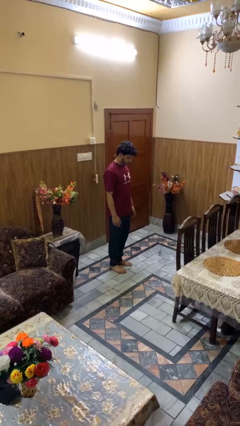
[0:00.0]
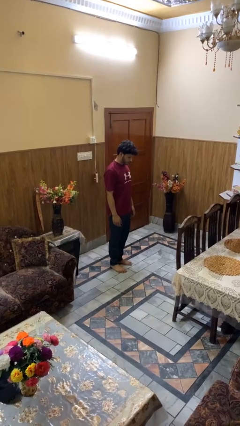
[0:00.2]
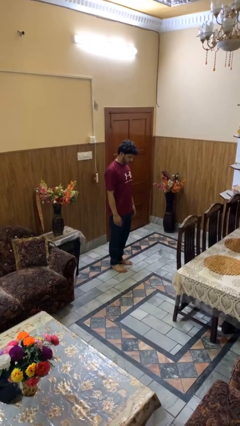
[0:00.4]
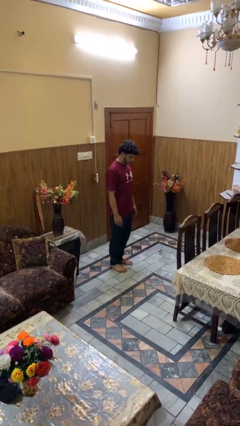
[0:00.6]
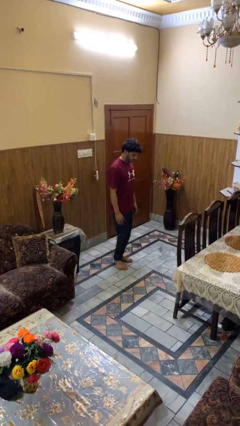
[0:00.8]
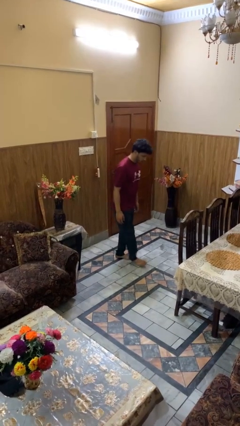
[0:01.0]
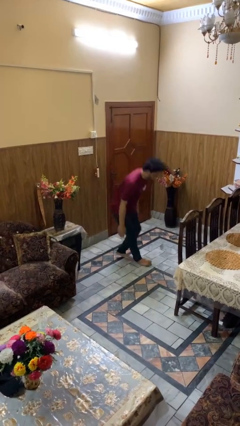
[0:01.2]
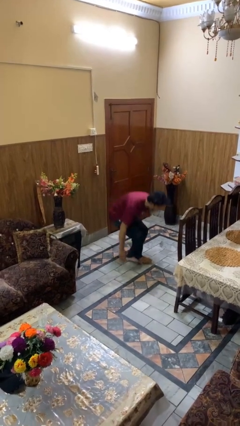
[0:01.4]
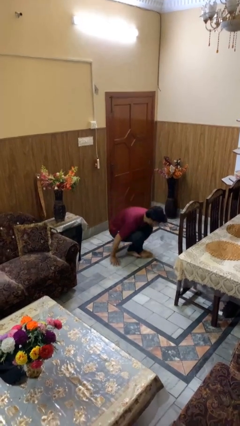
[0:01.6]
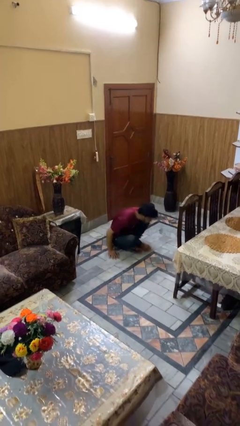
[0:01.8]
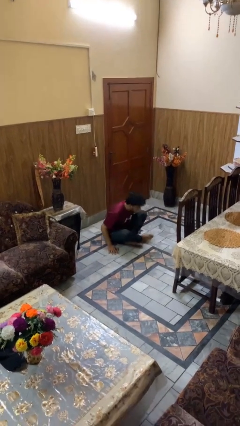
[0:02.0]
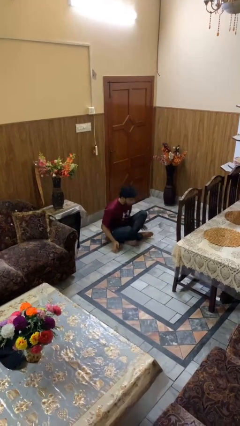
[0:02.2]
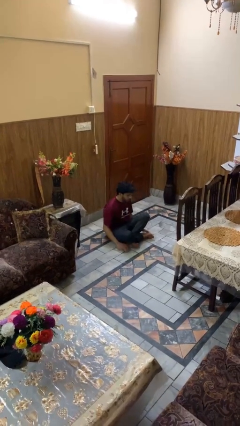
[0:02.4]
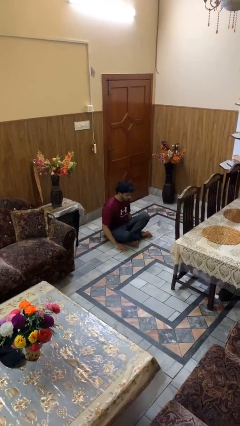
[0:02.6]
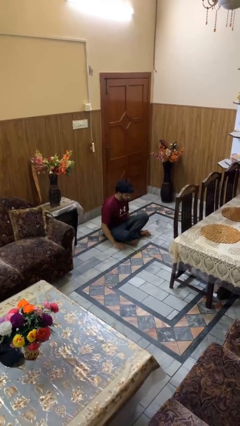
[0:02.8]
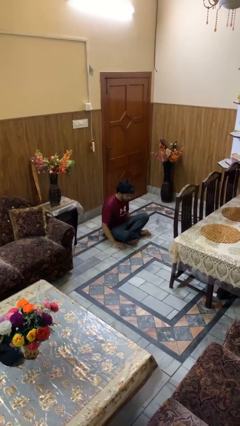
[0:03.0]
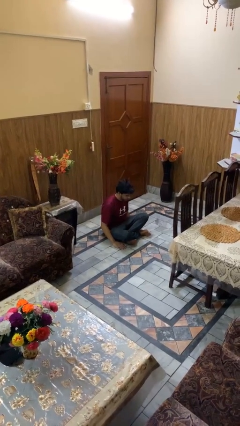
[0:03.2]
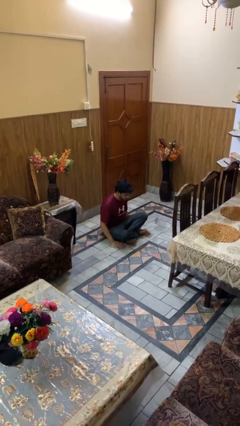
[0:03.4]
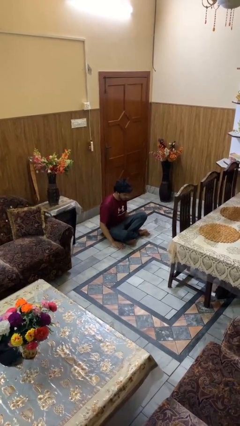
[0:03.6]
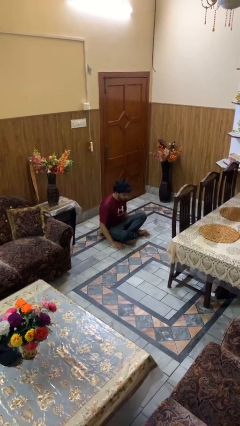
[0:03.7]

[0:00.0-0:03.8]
person sits crisscross

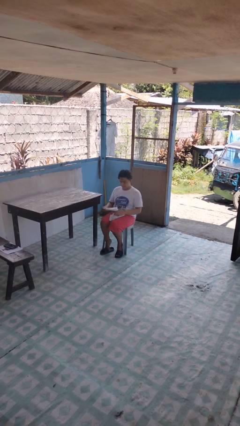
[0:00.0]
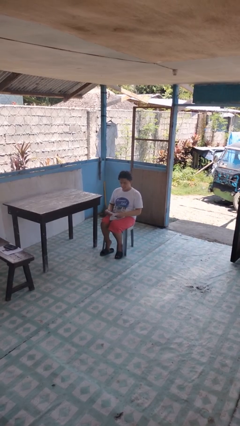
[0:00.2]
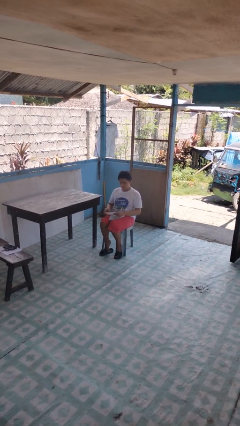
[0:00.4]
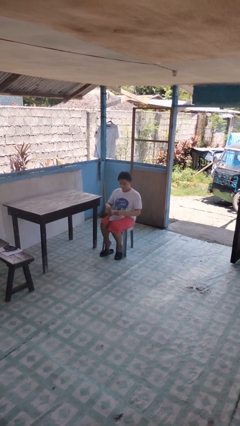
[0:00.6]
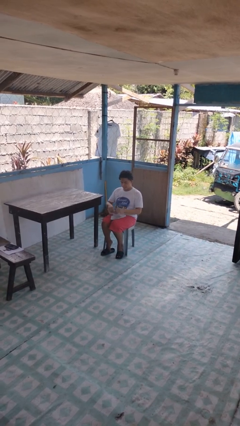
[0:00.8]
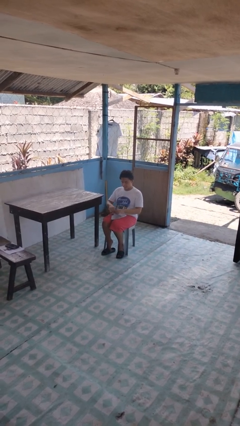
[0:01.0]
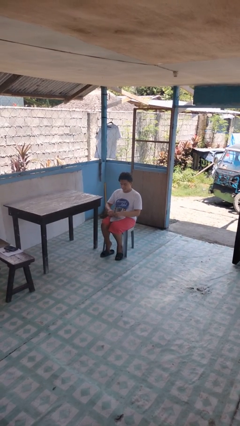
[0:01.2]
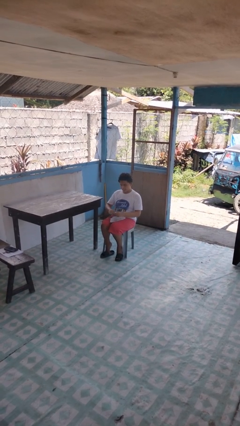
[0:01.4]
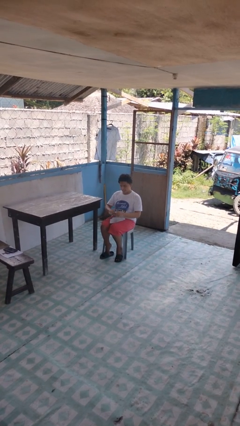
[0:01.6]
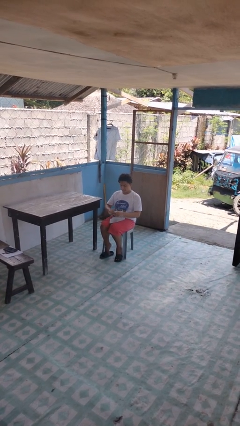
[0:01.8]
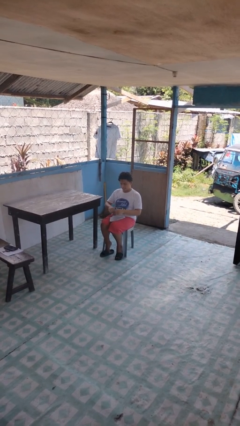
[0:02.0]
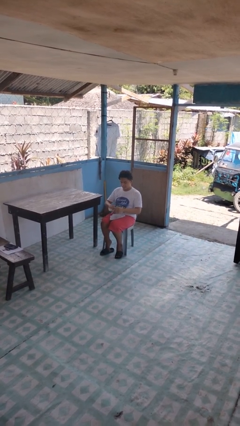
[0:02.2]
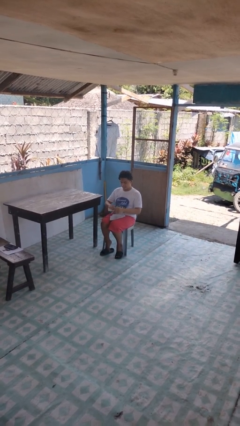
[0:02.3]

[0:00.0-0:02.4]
person tears paper

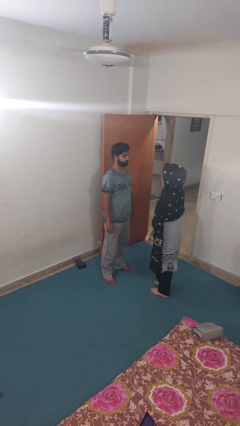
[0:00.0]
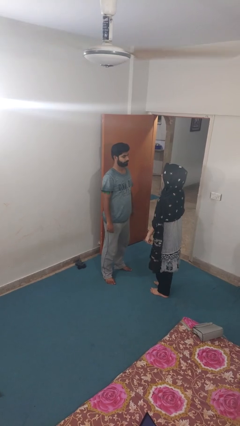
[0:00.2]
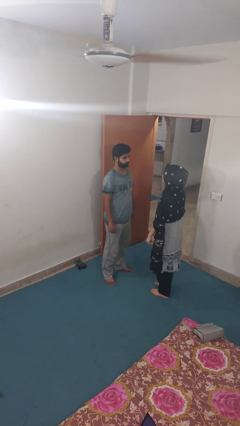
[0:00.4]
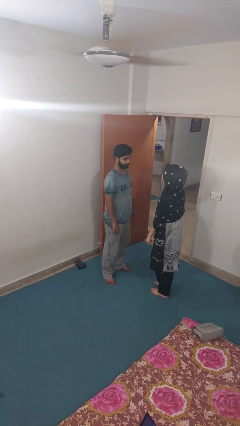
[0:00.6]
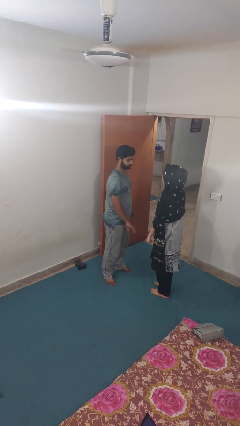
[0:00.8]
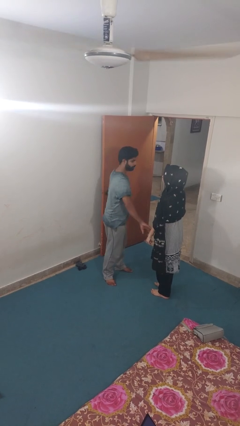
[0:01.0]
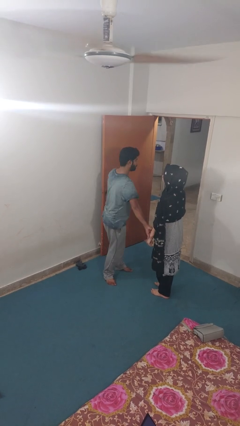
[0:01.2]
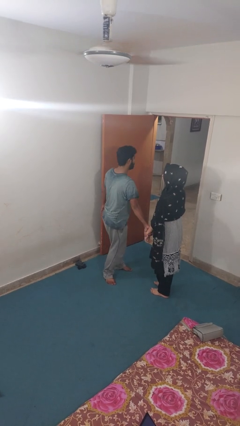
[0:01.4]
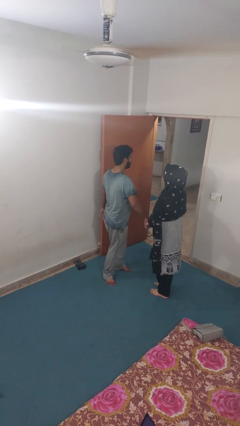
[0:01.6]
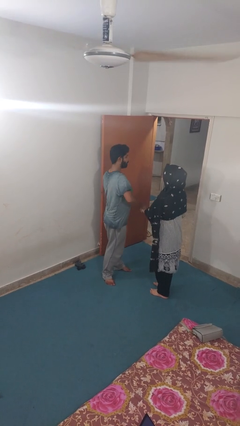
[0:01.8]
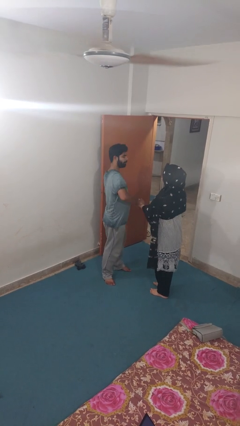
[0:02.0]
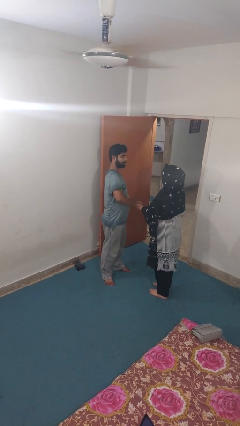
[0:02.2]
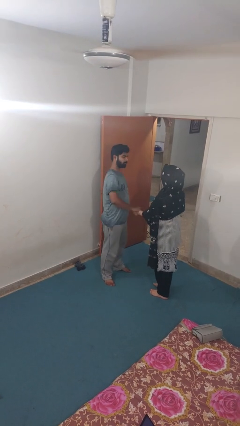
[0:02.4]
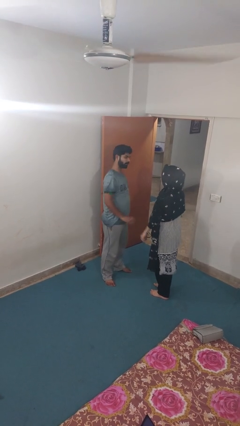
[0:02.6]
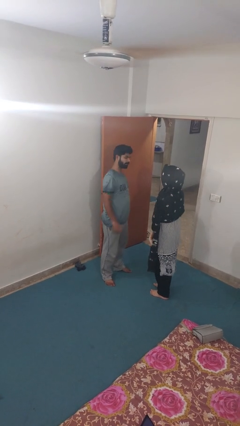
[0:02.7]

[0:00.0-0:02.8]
person grabs person by forearm

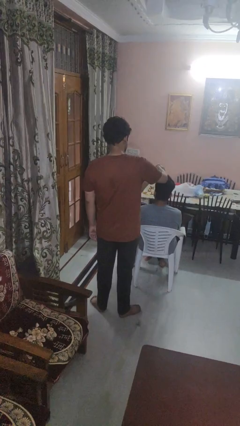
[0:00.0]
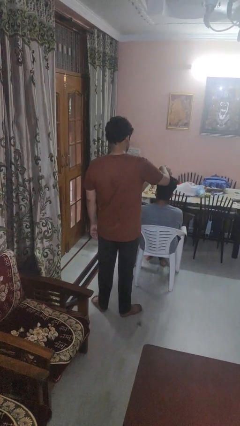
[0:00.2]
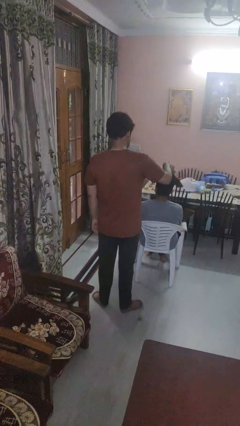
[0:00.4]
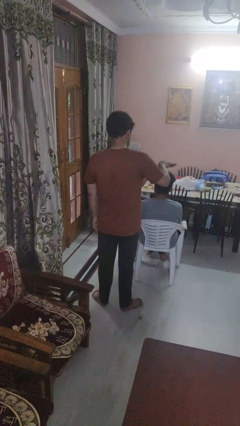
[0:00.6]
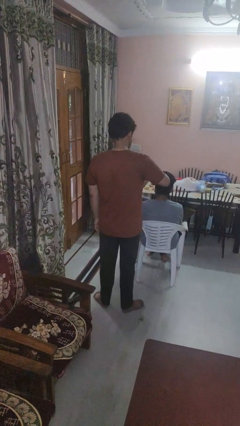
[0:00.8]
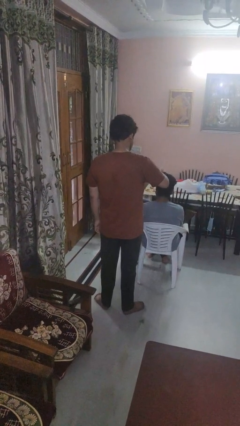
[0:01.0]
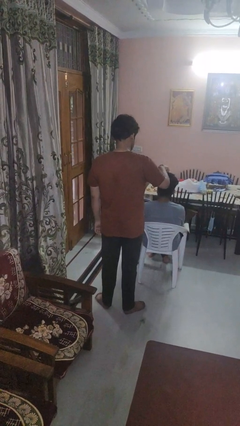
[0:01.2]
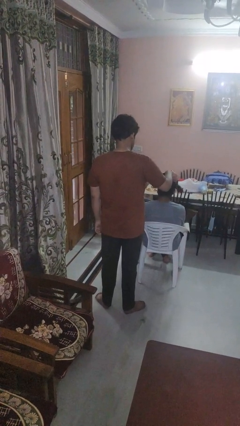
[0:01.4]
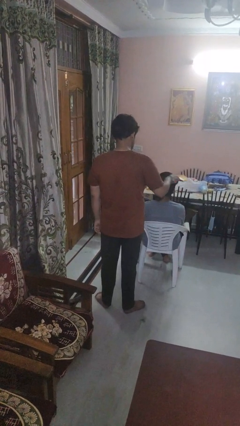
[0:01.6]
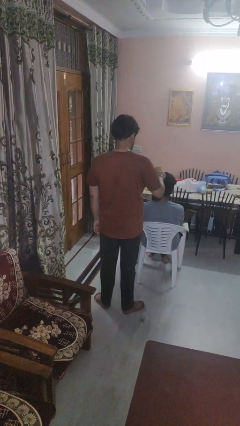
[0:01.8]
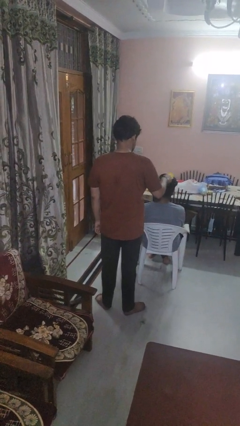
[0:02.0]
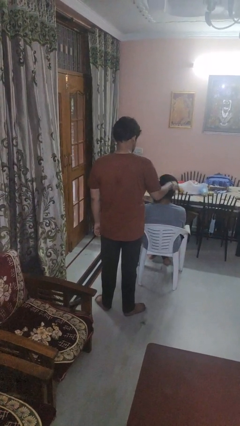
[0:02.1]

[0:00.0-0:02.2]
person brushes hair of person

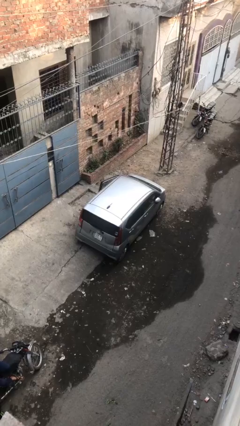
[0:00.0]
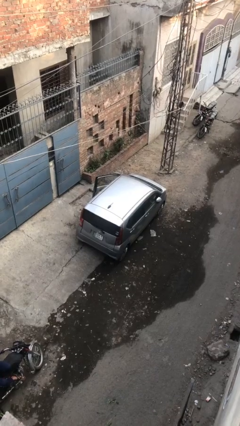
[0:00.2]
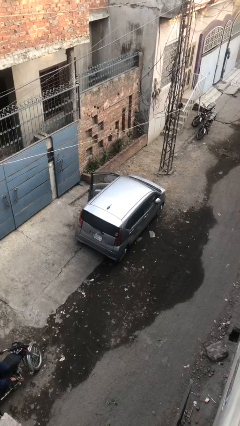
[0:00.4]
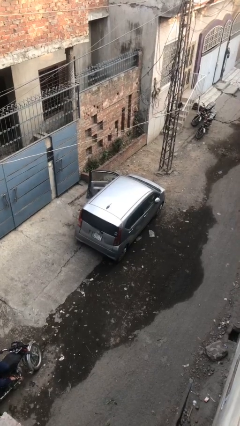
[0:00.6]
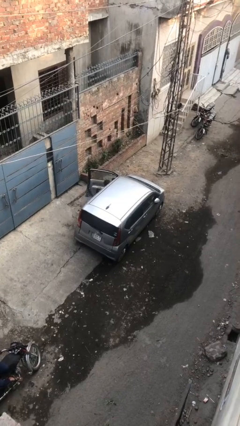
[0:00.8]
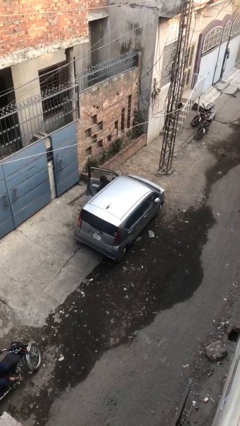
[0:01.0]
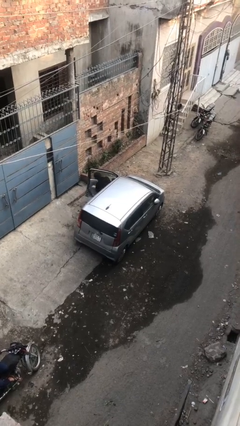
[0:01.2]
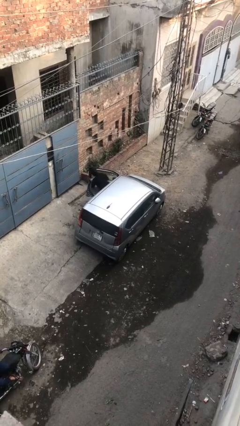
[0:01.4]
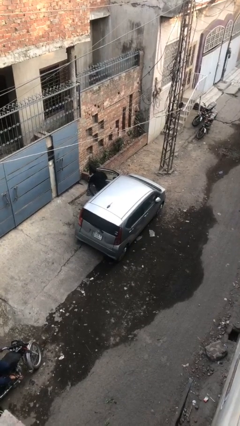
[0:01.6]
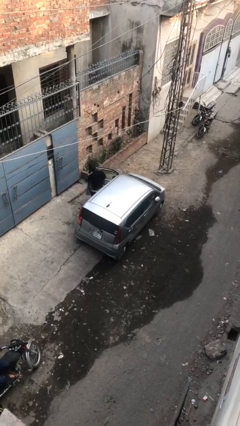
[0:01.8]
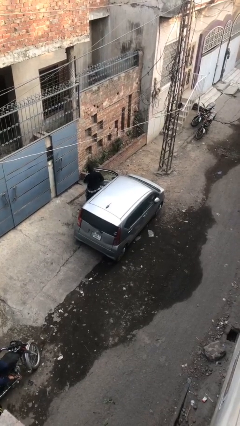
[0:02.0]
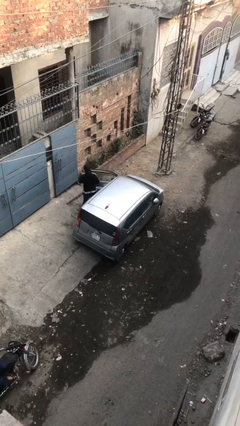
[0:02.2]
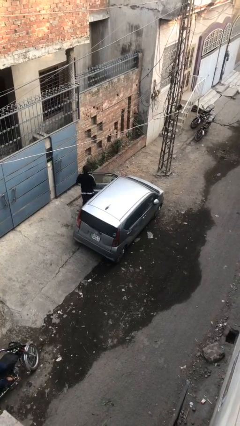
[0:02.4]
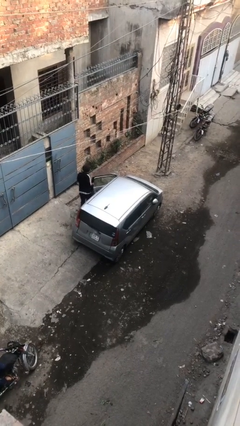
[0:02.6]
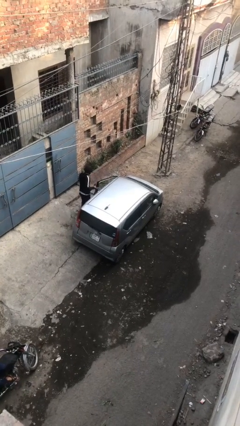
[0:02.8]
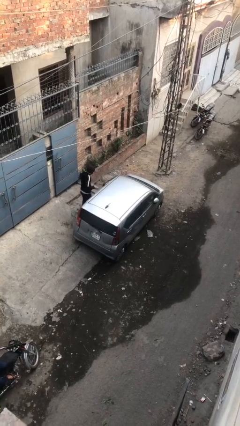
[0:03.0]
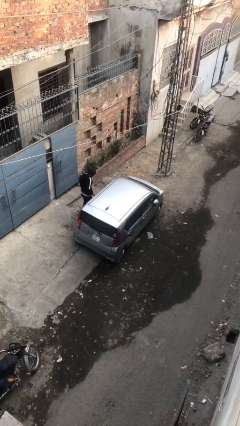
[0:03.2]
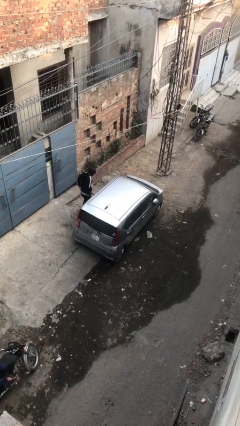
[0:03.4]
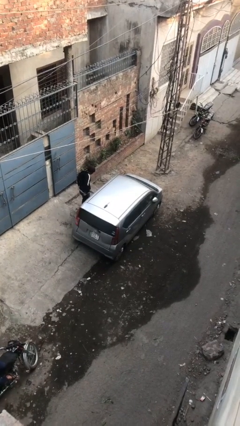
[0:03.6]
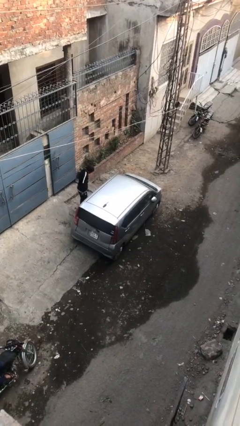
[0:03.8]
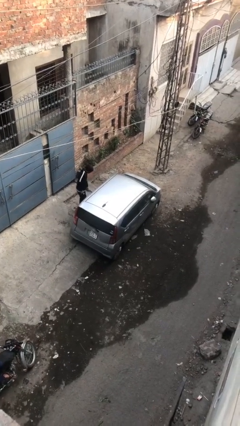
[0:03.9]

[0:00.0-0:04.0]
car drops off person

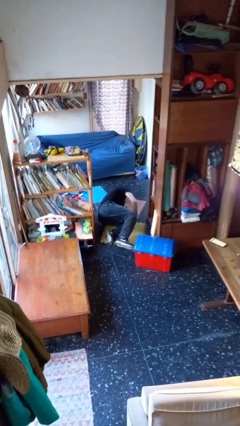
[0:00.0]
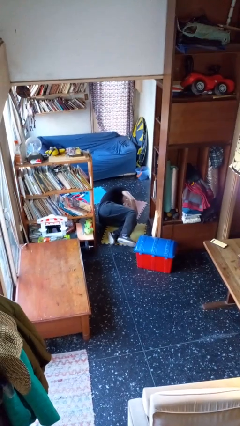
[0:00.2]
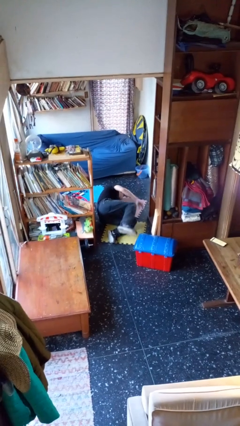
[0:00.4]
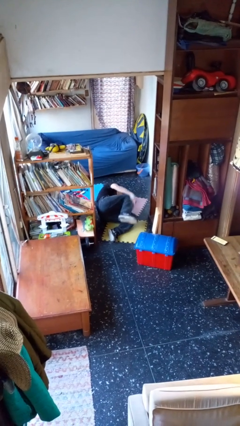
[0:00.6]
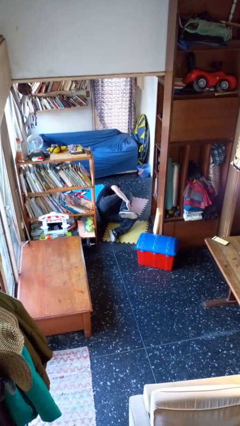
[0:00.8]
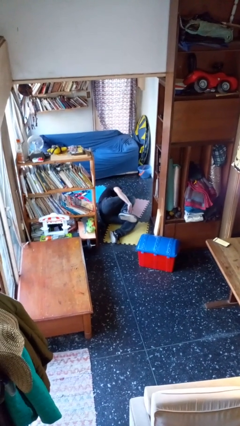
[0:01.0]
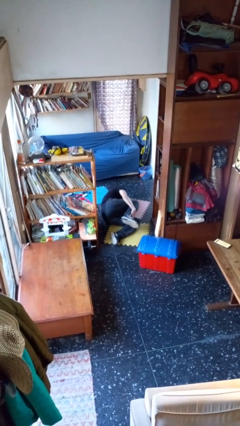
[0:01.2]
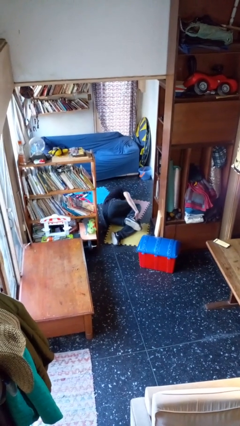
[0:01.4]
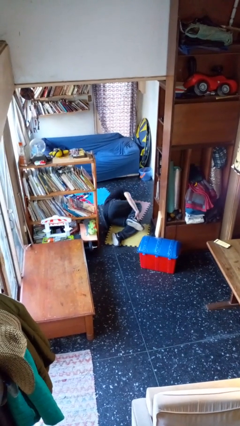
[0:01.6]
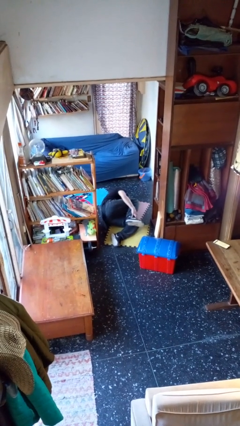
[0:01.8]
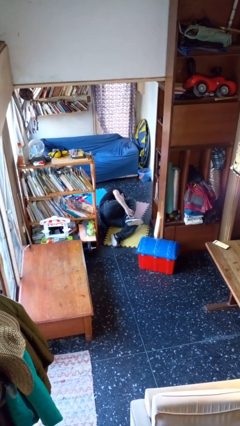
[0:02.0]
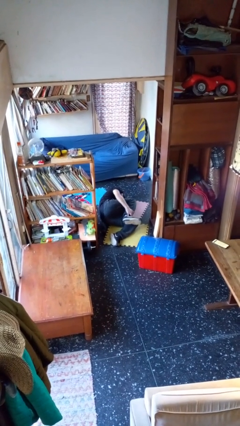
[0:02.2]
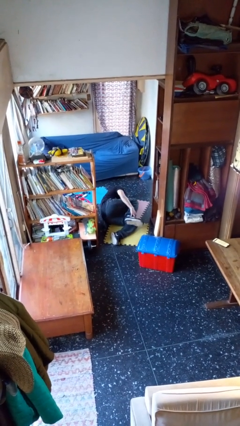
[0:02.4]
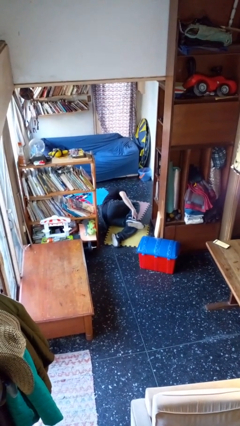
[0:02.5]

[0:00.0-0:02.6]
person lies down on floor

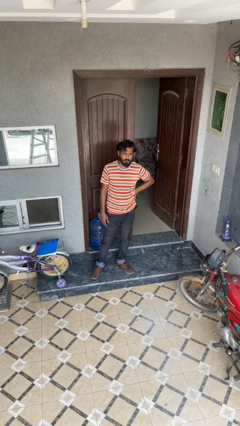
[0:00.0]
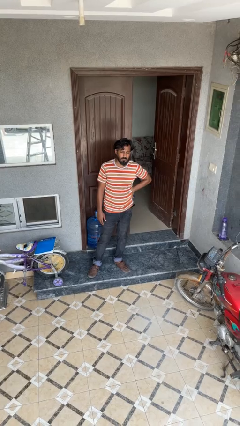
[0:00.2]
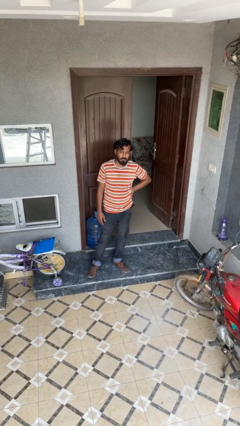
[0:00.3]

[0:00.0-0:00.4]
person gestures swipe down
